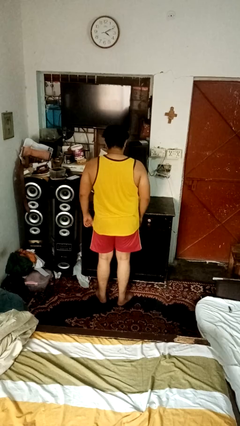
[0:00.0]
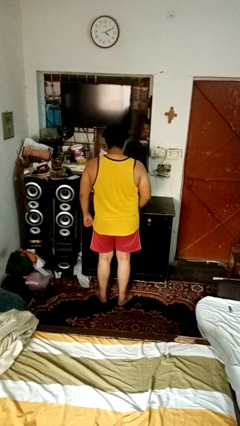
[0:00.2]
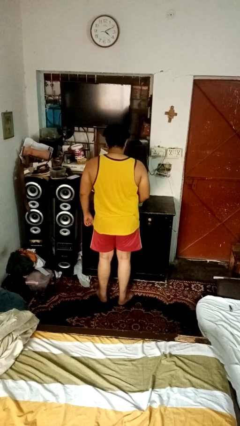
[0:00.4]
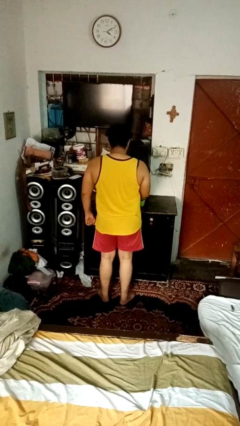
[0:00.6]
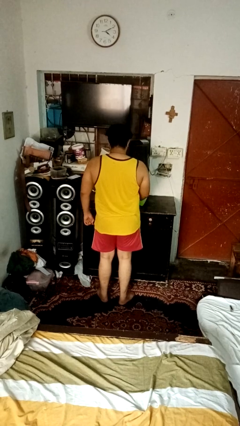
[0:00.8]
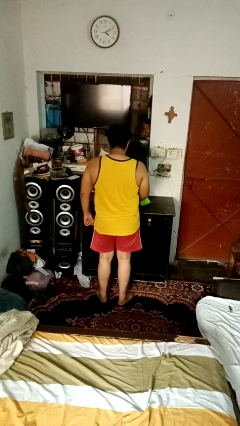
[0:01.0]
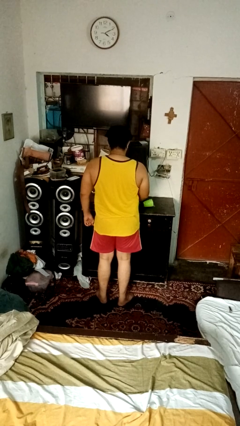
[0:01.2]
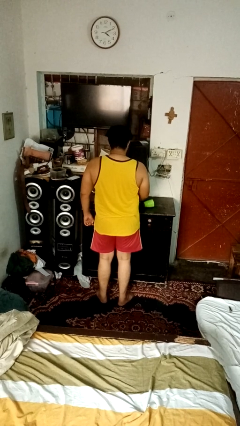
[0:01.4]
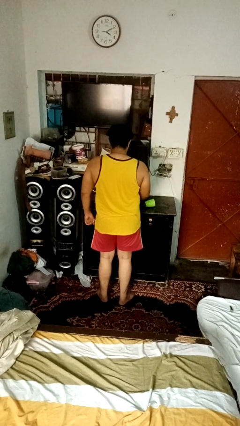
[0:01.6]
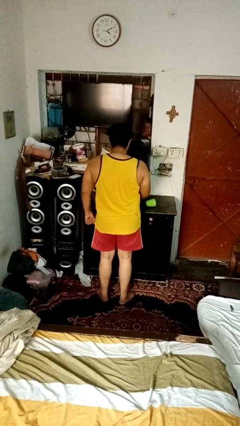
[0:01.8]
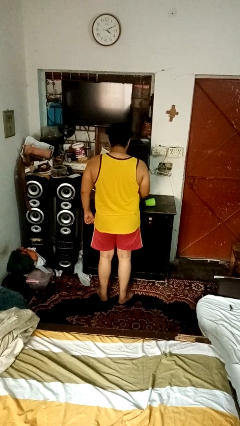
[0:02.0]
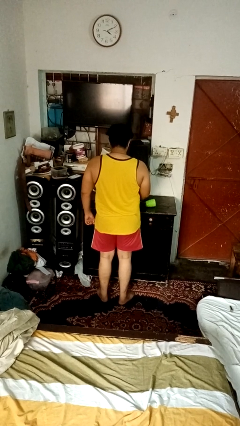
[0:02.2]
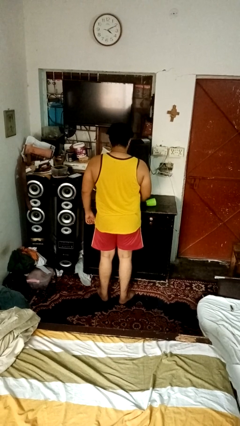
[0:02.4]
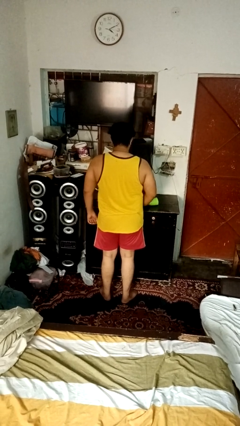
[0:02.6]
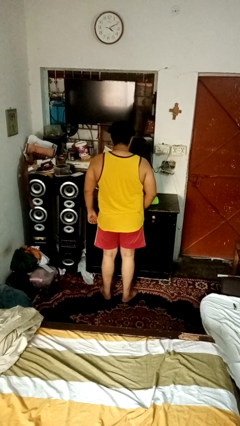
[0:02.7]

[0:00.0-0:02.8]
person spills on table

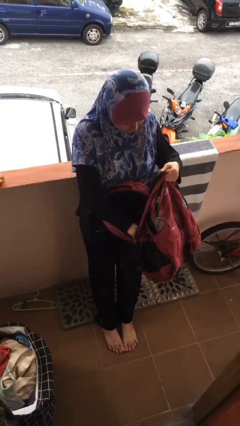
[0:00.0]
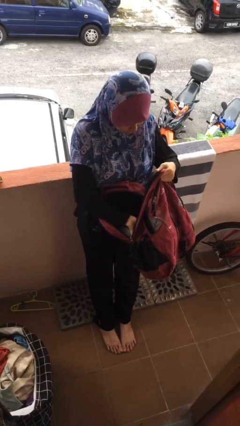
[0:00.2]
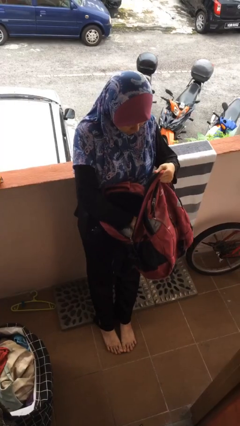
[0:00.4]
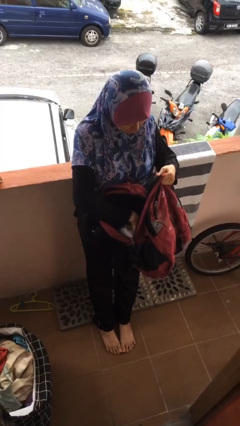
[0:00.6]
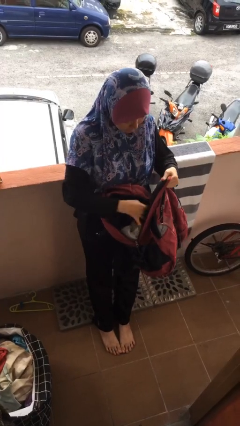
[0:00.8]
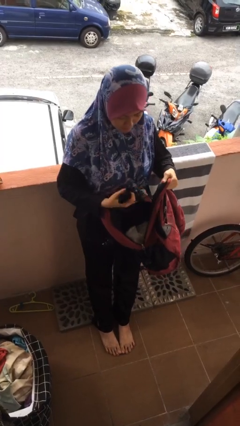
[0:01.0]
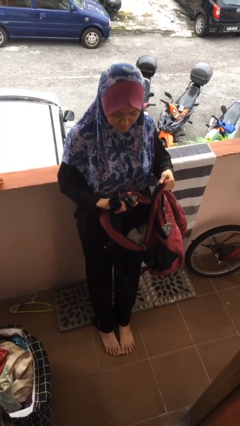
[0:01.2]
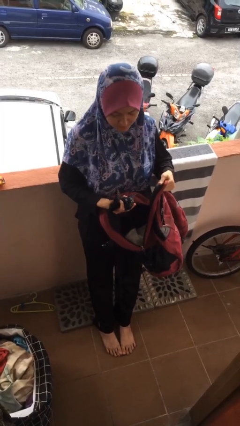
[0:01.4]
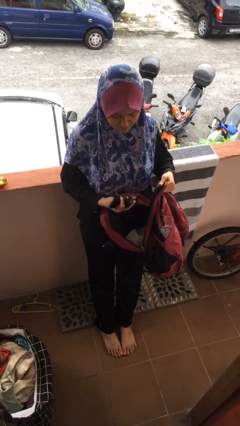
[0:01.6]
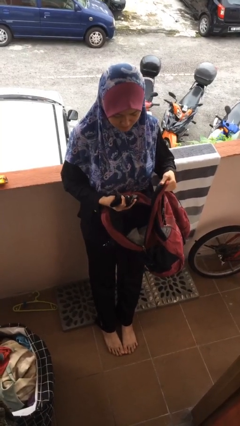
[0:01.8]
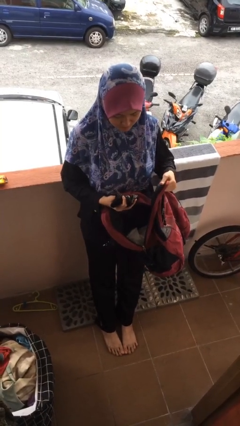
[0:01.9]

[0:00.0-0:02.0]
person takes object from backpack

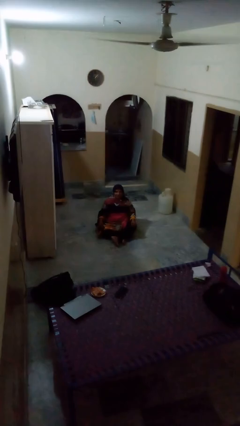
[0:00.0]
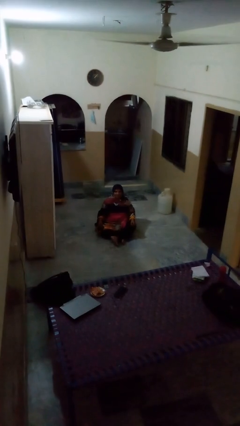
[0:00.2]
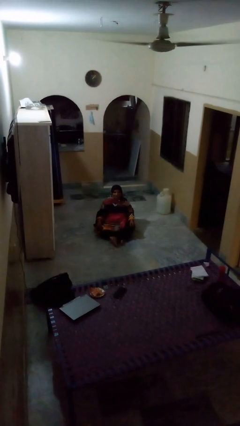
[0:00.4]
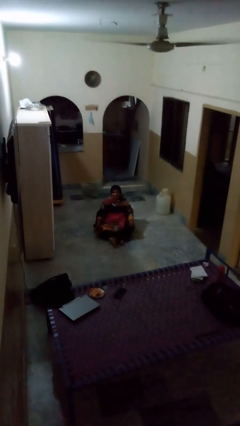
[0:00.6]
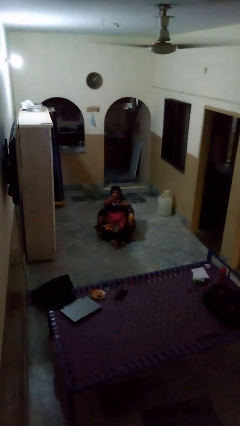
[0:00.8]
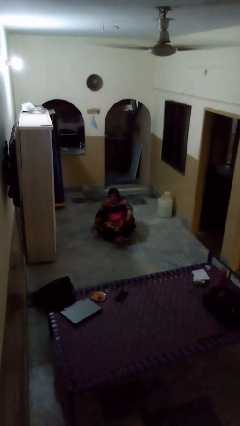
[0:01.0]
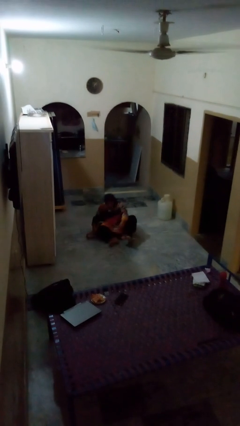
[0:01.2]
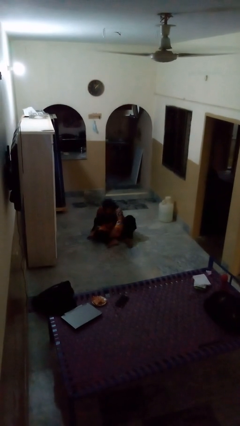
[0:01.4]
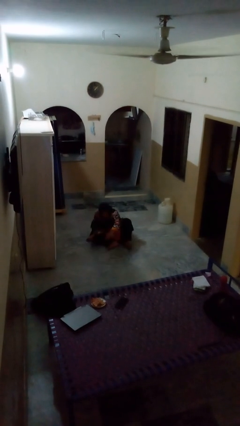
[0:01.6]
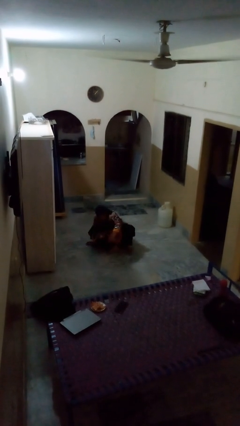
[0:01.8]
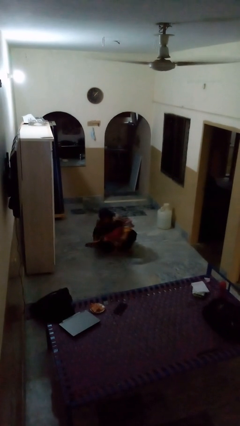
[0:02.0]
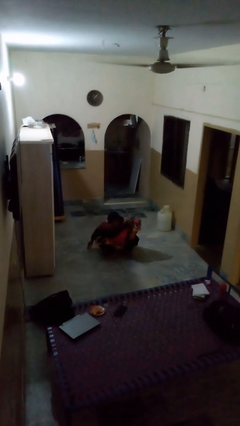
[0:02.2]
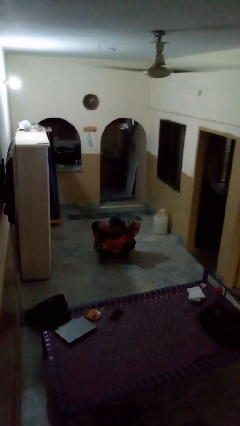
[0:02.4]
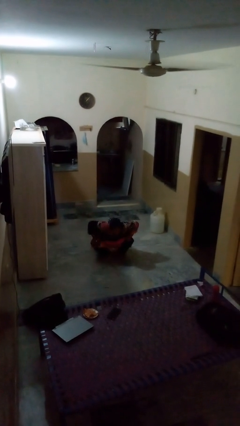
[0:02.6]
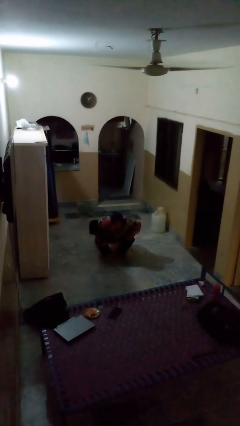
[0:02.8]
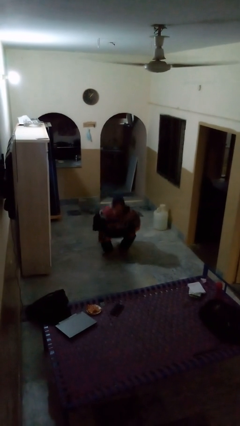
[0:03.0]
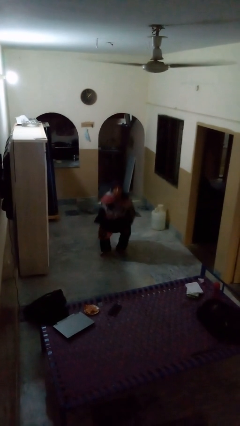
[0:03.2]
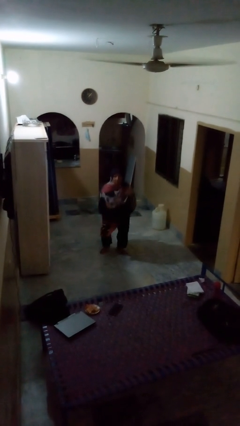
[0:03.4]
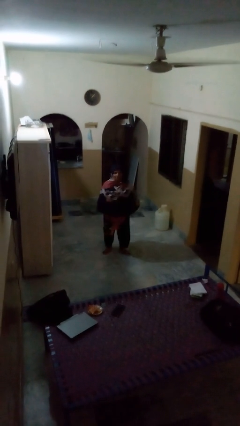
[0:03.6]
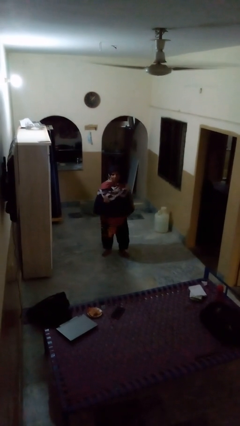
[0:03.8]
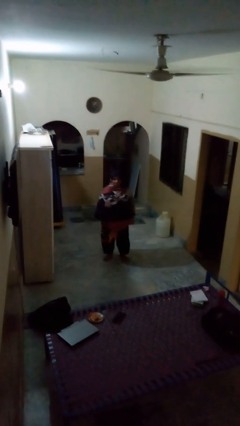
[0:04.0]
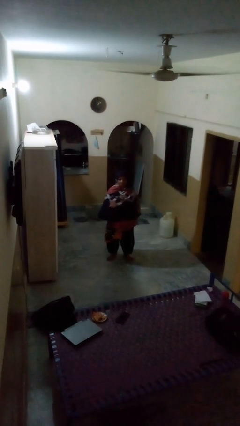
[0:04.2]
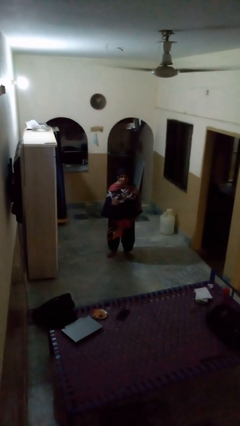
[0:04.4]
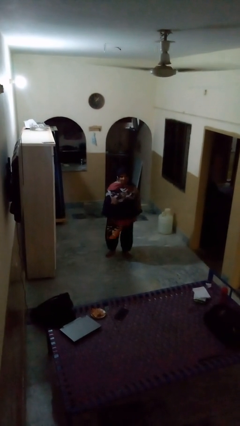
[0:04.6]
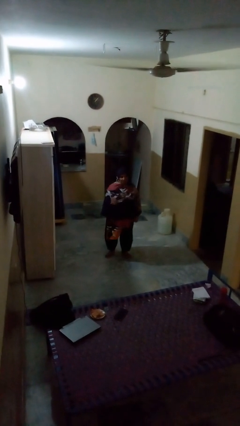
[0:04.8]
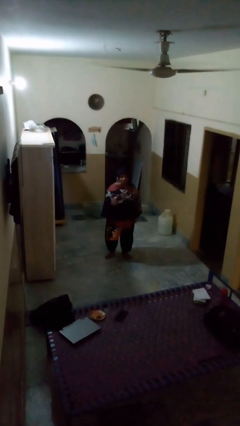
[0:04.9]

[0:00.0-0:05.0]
person stands up from floor

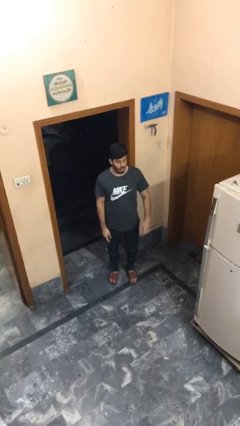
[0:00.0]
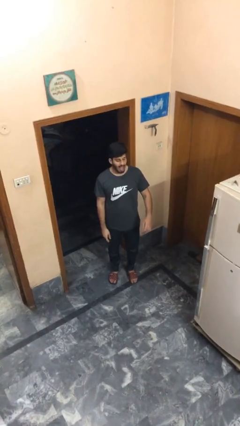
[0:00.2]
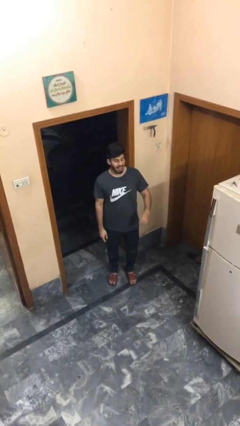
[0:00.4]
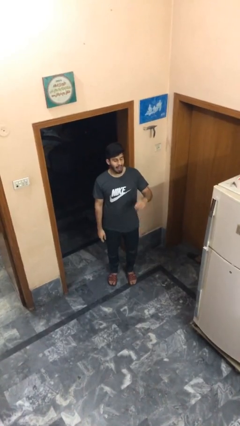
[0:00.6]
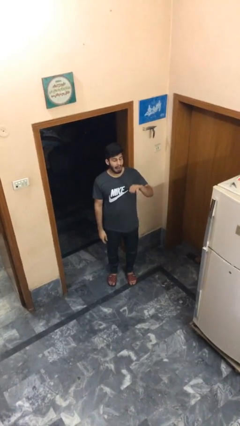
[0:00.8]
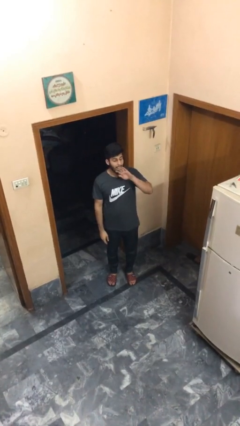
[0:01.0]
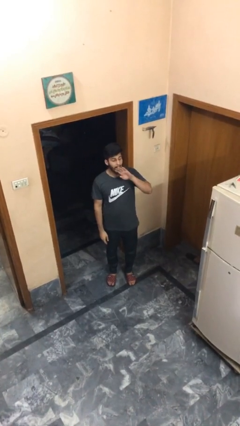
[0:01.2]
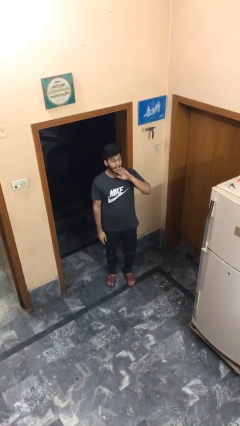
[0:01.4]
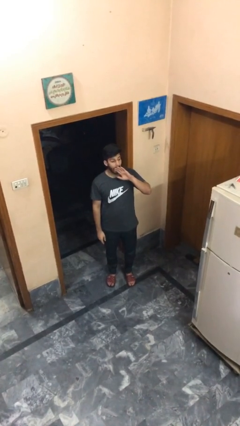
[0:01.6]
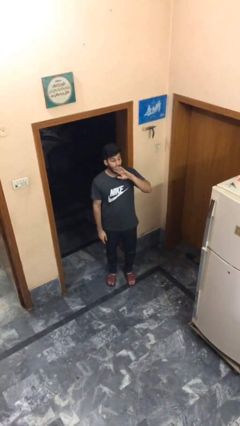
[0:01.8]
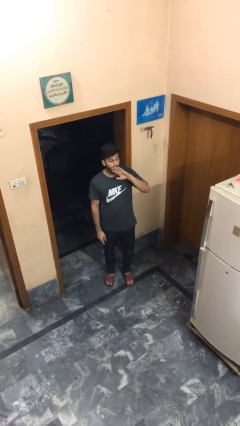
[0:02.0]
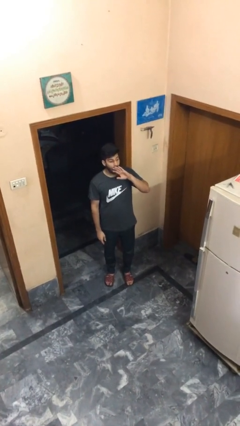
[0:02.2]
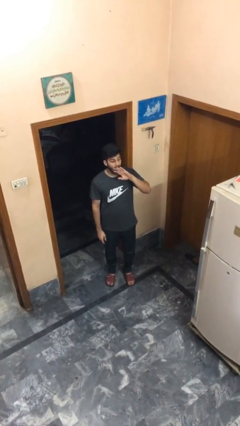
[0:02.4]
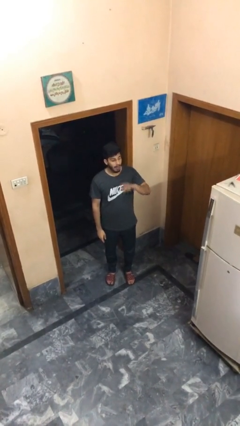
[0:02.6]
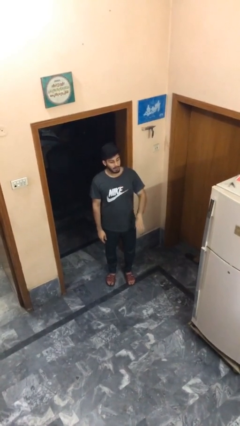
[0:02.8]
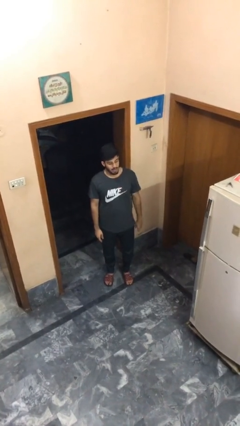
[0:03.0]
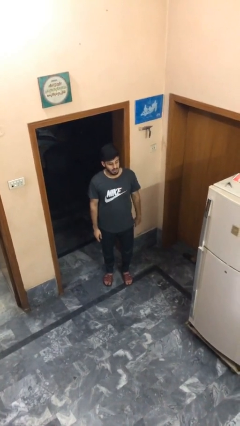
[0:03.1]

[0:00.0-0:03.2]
person yawns

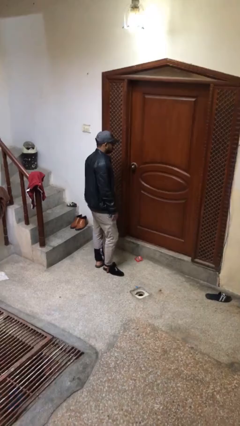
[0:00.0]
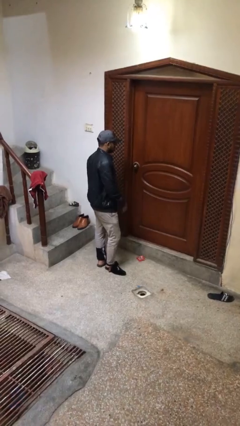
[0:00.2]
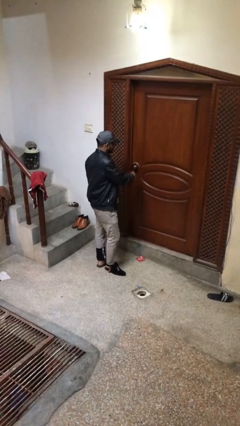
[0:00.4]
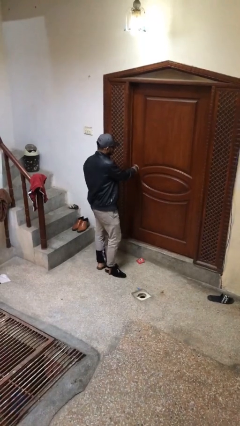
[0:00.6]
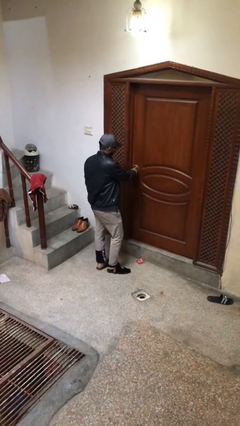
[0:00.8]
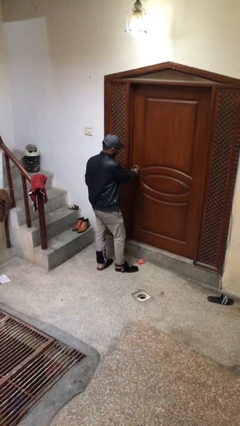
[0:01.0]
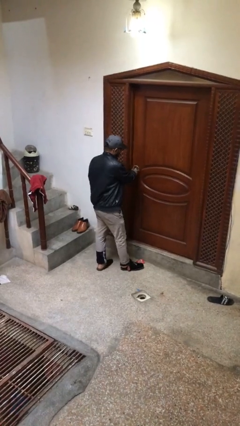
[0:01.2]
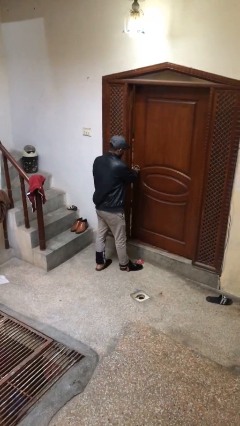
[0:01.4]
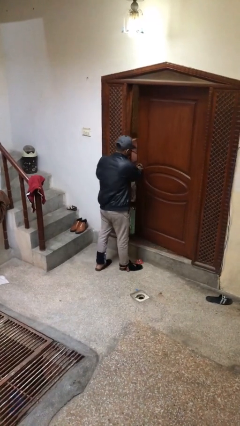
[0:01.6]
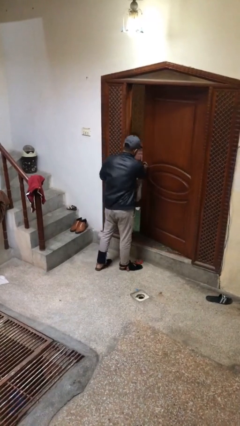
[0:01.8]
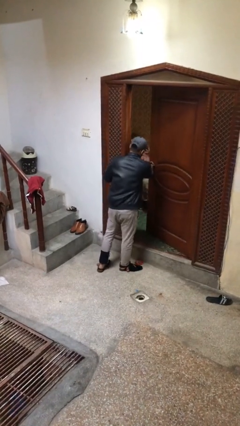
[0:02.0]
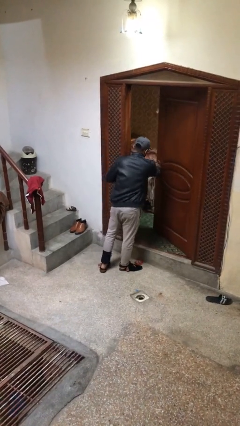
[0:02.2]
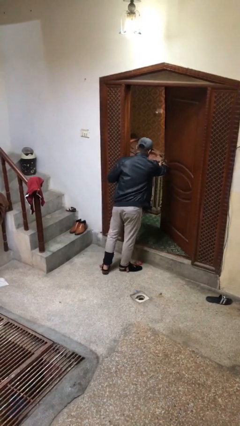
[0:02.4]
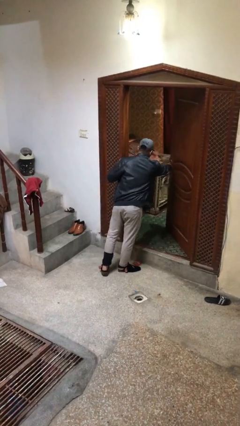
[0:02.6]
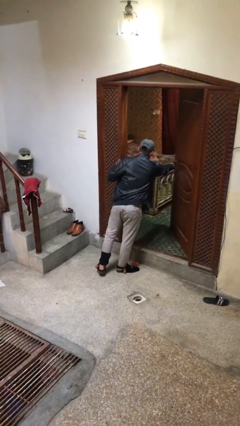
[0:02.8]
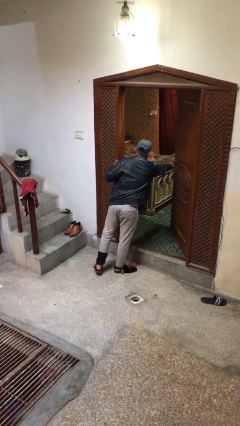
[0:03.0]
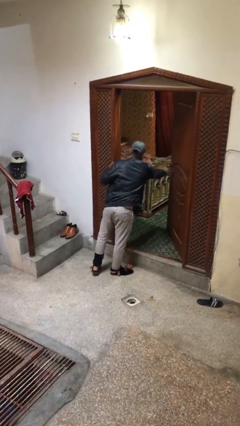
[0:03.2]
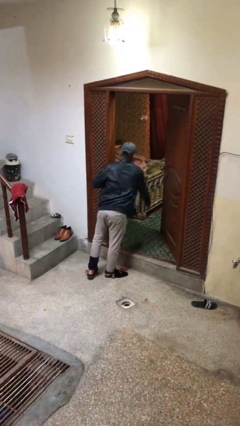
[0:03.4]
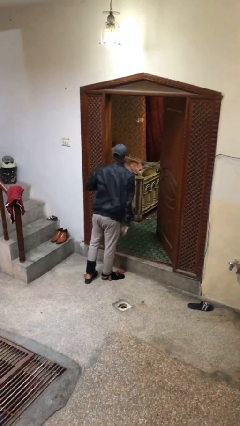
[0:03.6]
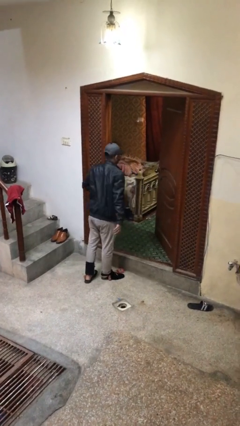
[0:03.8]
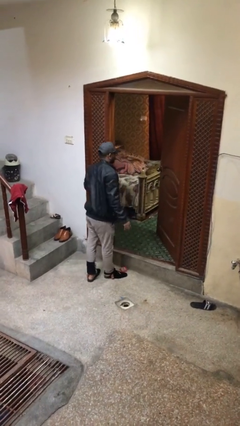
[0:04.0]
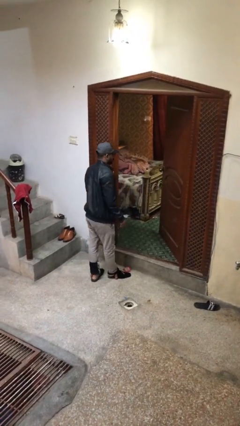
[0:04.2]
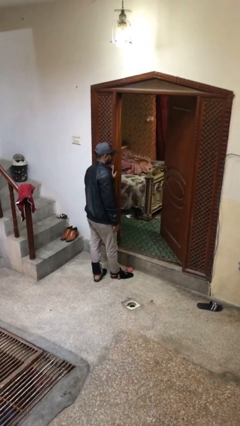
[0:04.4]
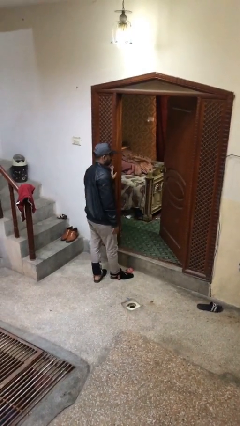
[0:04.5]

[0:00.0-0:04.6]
person opens facility door
